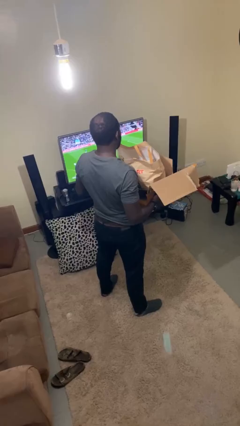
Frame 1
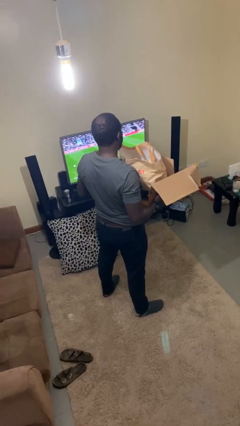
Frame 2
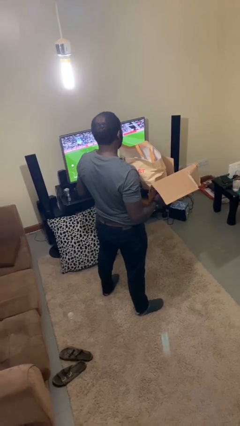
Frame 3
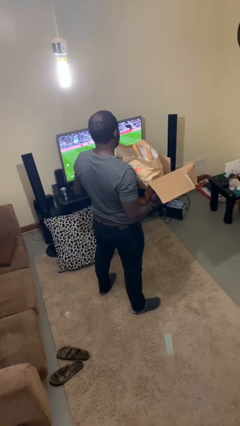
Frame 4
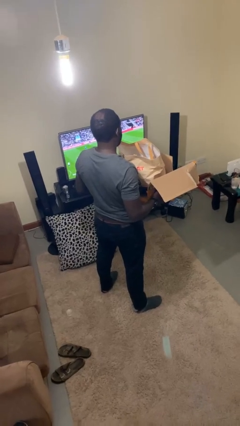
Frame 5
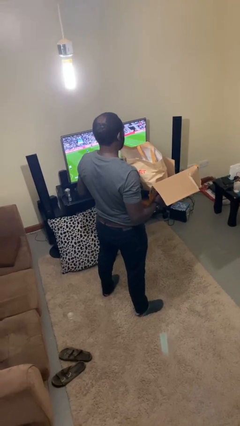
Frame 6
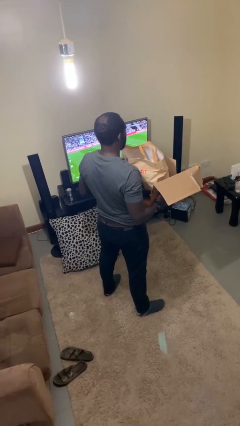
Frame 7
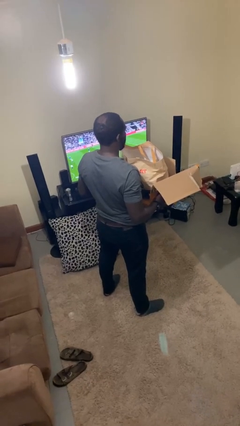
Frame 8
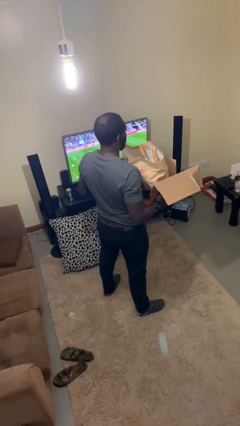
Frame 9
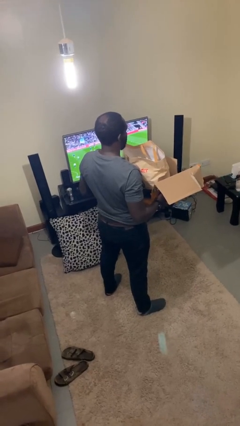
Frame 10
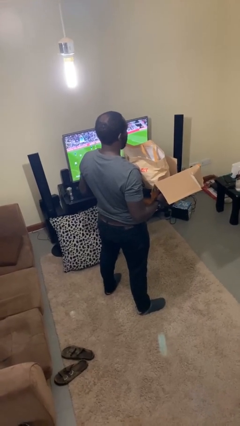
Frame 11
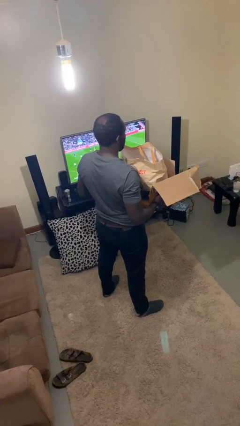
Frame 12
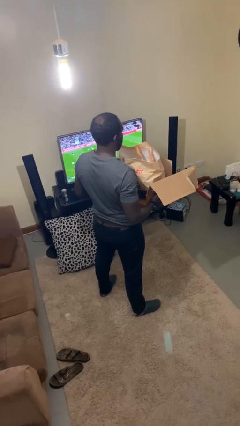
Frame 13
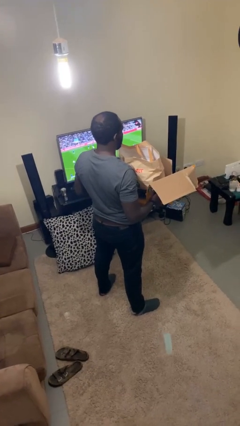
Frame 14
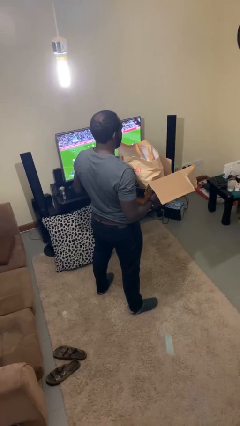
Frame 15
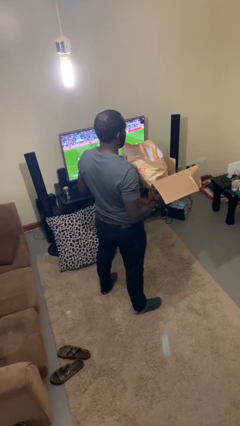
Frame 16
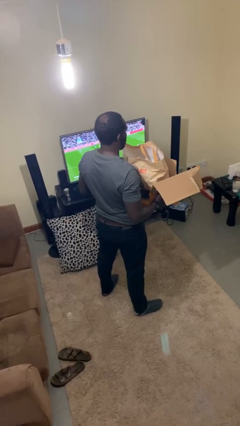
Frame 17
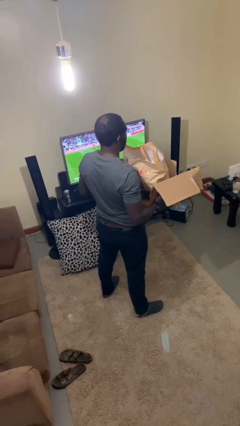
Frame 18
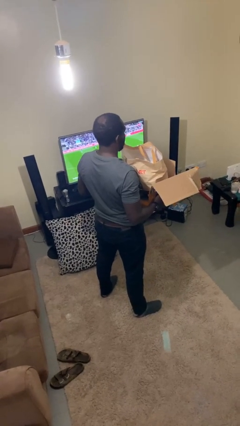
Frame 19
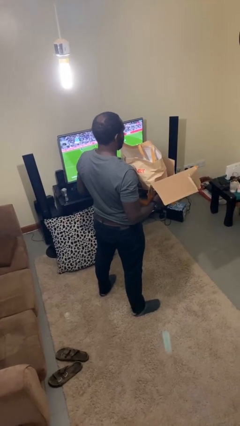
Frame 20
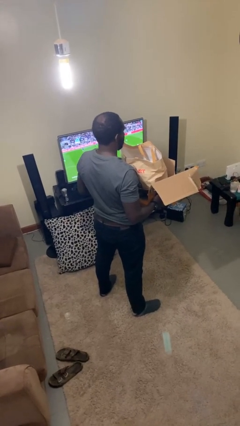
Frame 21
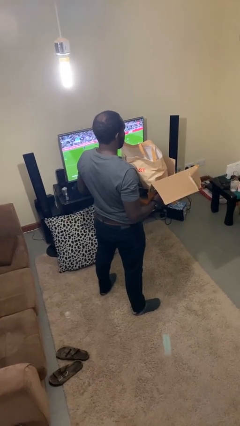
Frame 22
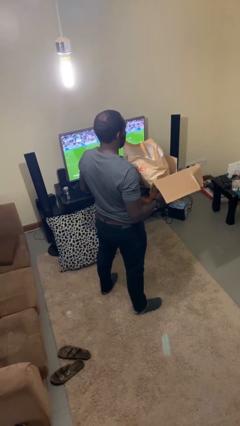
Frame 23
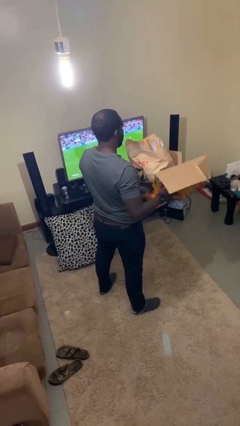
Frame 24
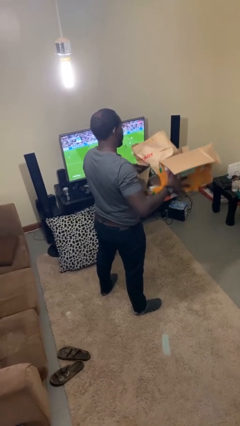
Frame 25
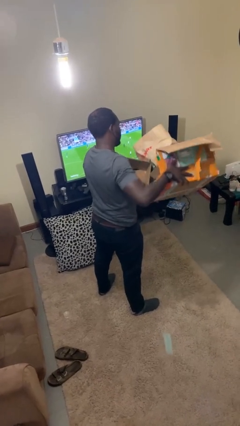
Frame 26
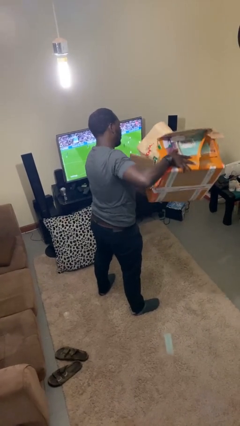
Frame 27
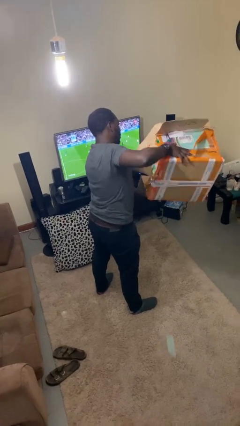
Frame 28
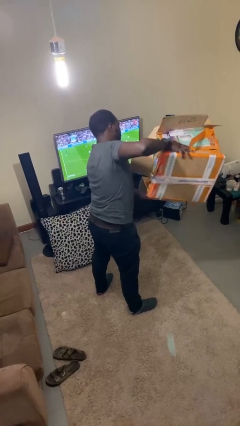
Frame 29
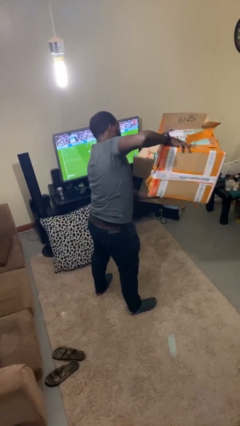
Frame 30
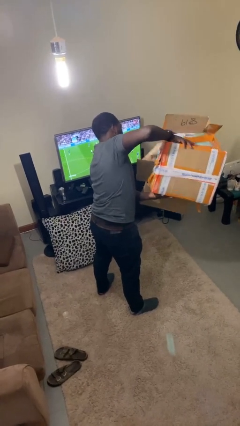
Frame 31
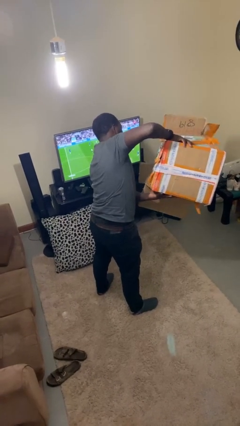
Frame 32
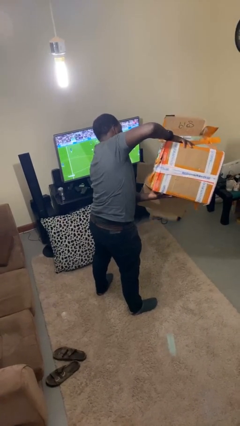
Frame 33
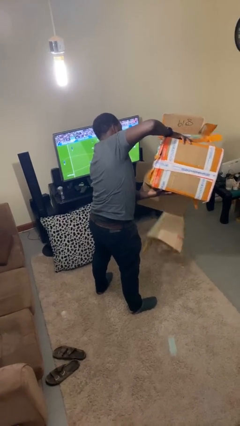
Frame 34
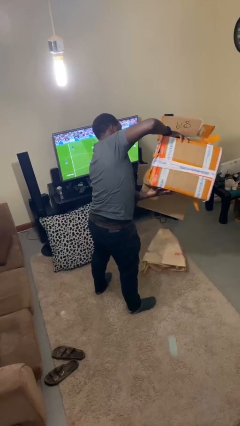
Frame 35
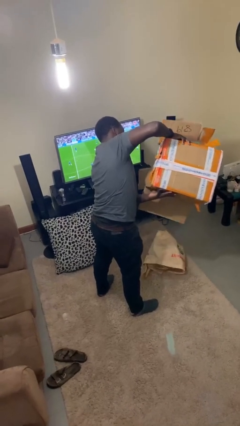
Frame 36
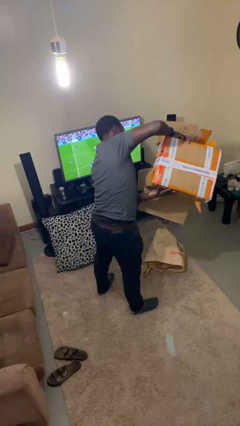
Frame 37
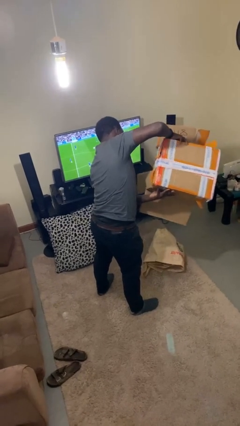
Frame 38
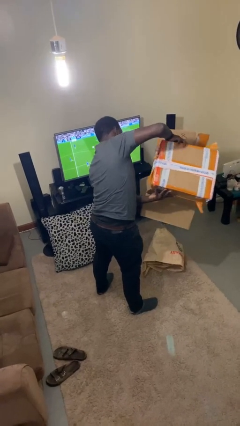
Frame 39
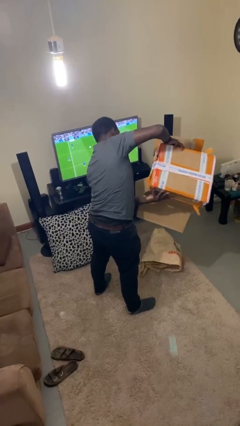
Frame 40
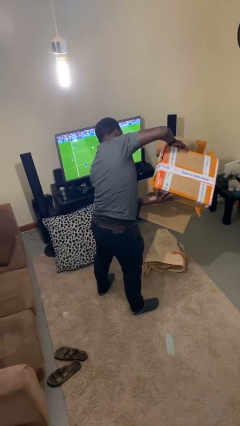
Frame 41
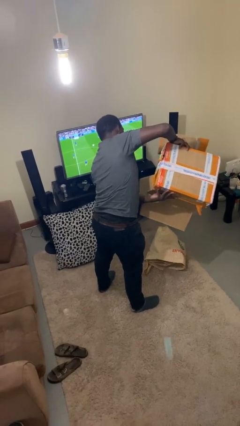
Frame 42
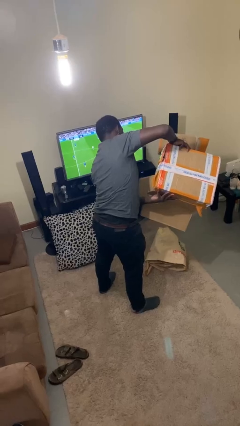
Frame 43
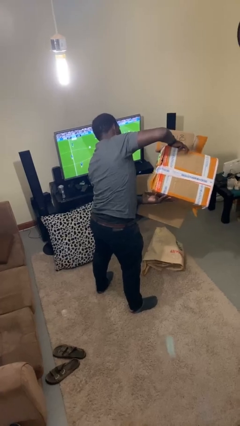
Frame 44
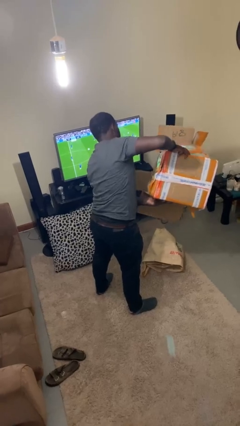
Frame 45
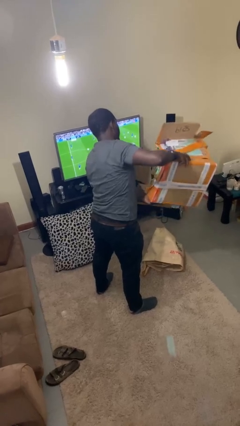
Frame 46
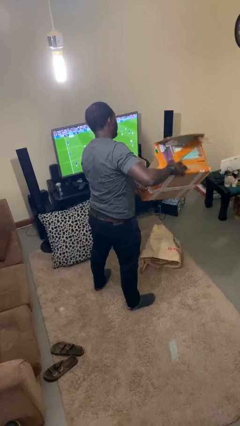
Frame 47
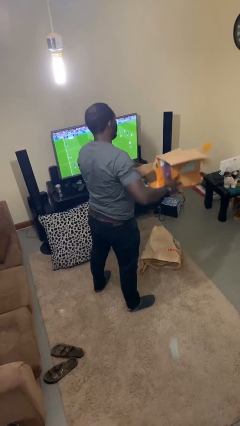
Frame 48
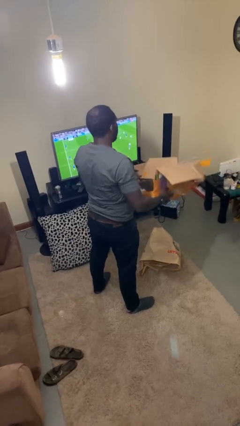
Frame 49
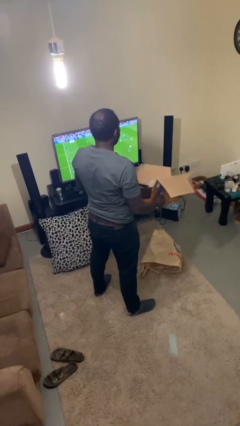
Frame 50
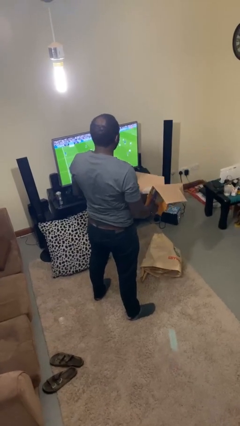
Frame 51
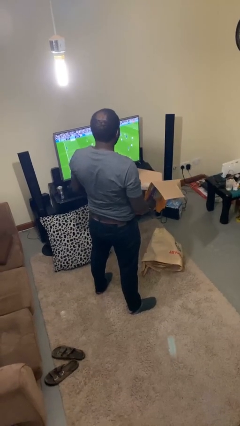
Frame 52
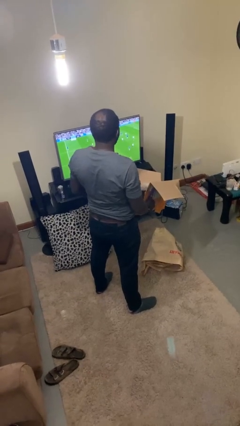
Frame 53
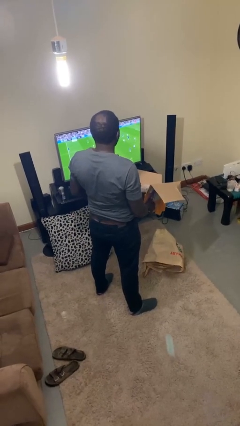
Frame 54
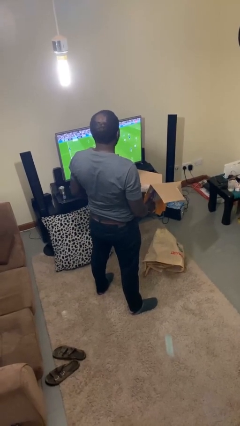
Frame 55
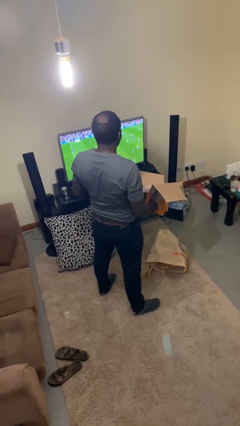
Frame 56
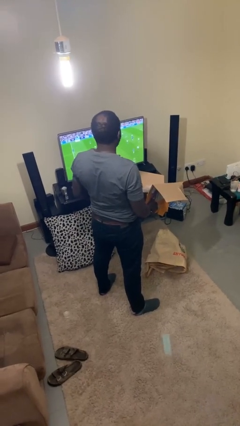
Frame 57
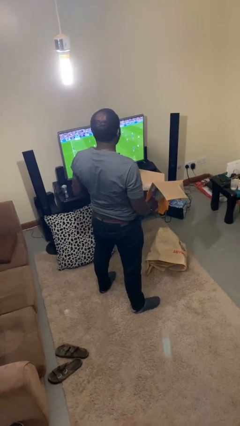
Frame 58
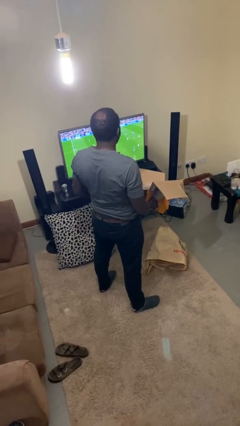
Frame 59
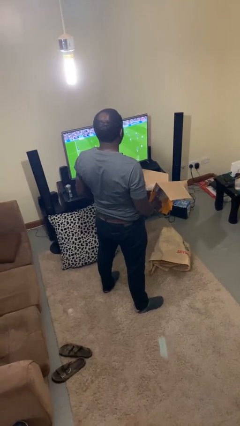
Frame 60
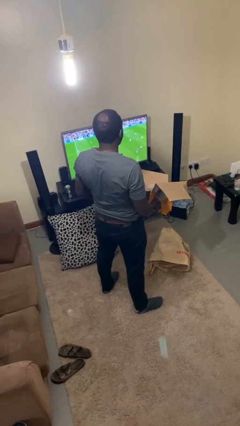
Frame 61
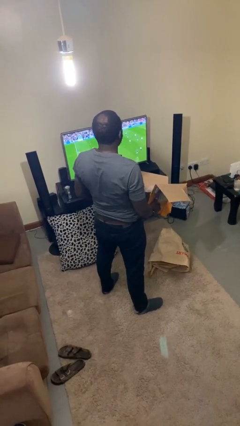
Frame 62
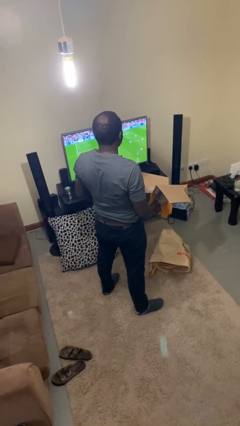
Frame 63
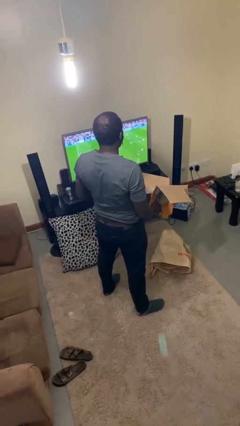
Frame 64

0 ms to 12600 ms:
person unloads box onto floor

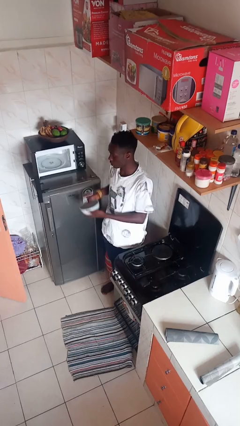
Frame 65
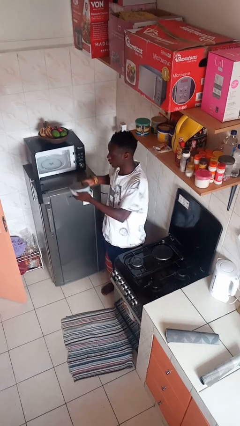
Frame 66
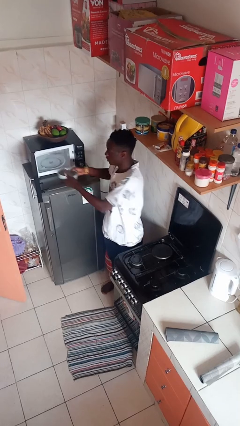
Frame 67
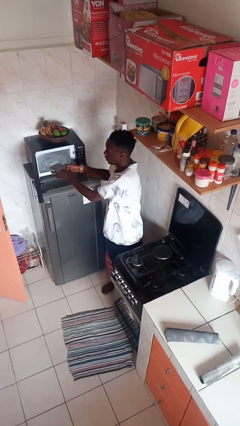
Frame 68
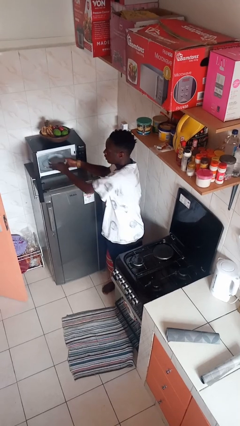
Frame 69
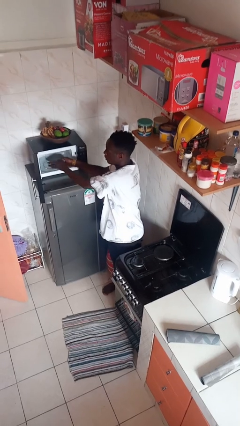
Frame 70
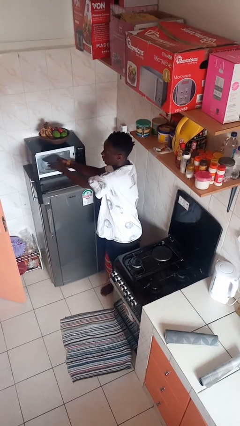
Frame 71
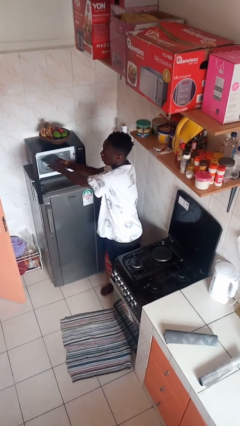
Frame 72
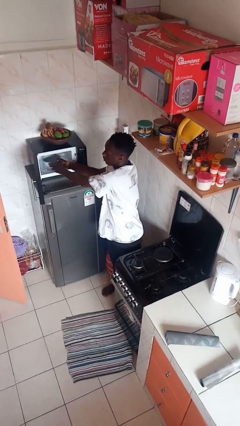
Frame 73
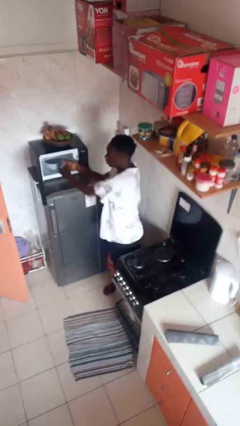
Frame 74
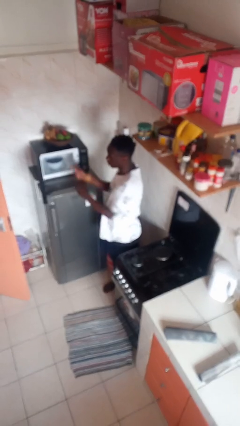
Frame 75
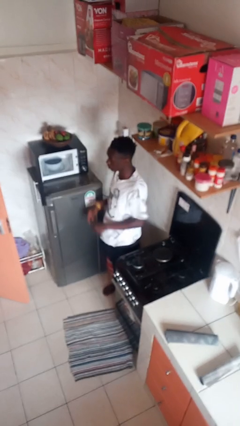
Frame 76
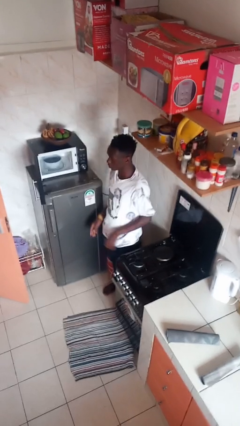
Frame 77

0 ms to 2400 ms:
person puts object into microwave

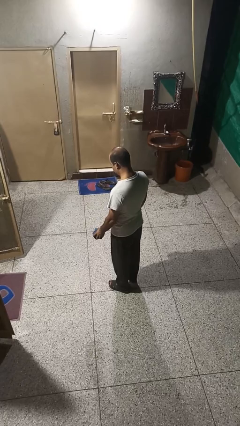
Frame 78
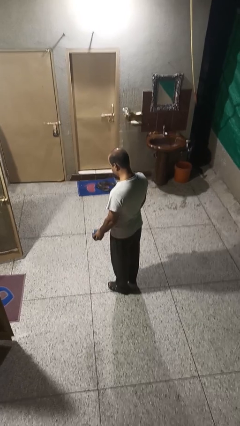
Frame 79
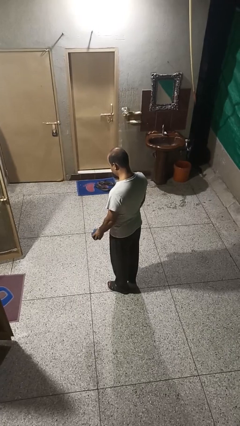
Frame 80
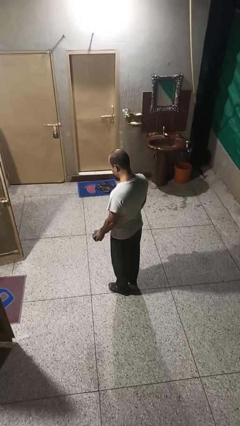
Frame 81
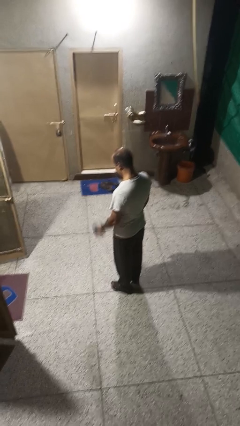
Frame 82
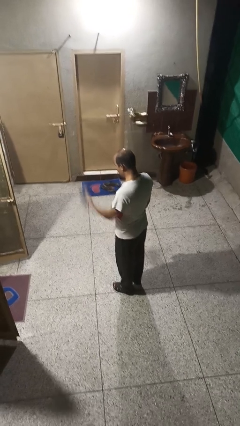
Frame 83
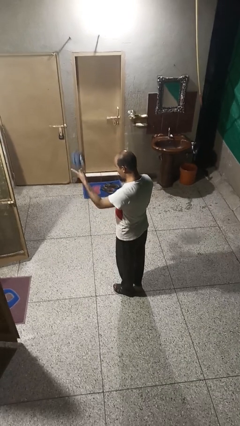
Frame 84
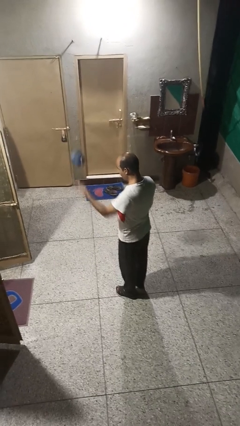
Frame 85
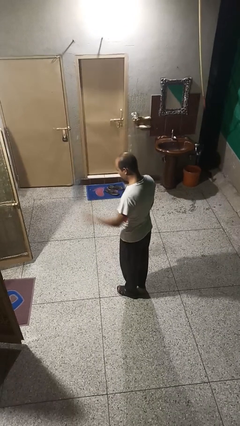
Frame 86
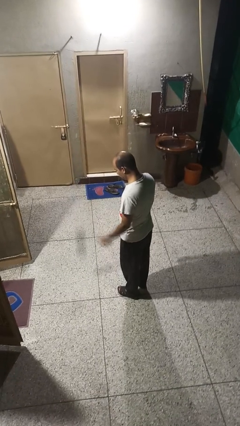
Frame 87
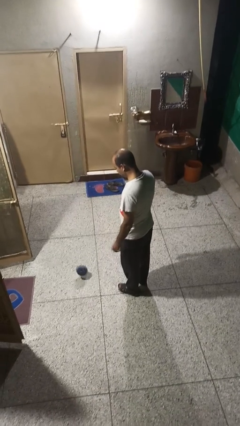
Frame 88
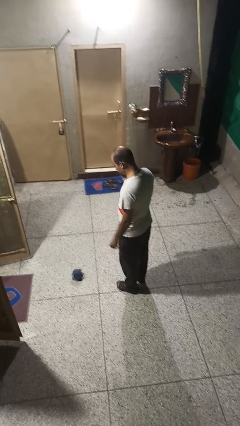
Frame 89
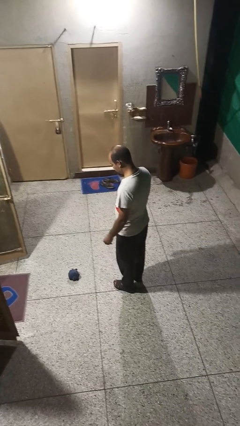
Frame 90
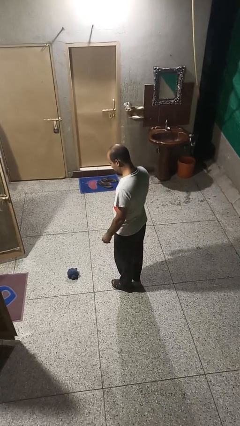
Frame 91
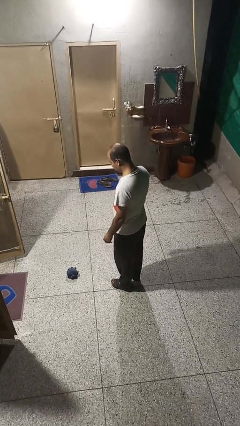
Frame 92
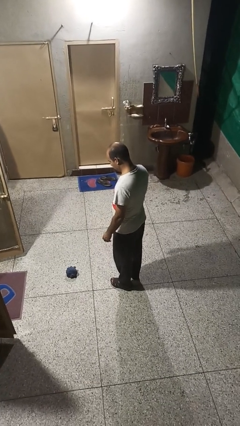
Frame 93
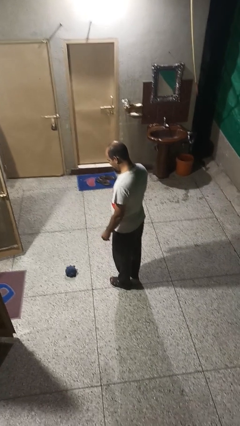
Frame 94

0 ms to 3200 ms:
person throws object into air
